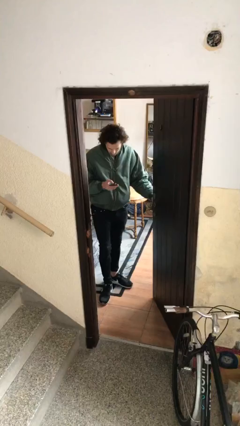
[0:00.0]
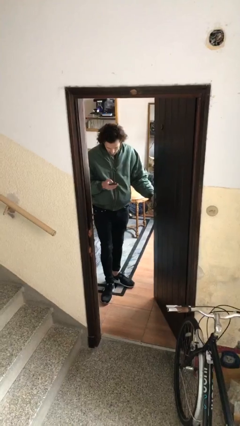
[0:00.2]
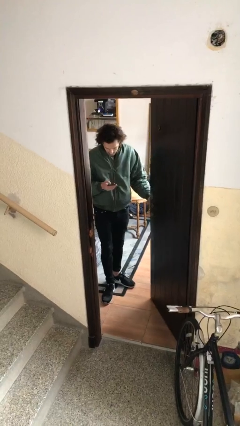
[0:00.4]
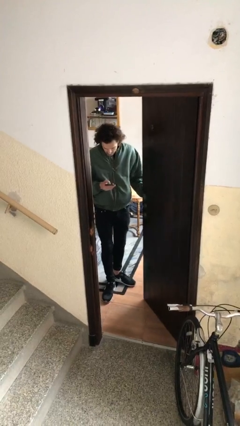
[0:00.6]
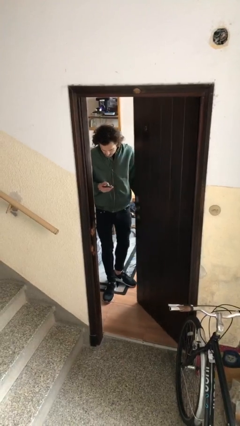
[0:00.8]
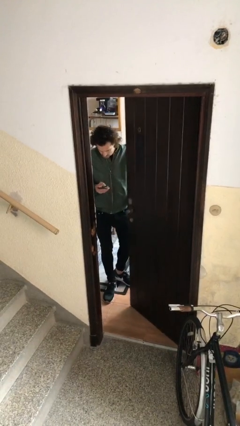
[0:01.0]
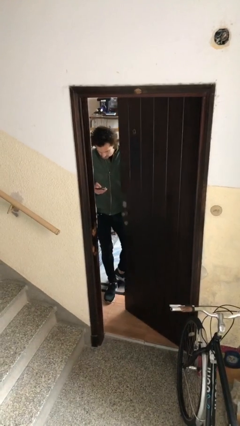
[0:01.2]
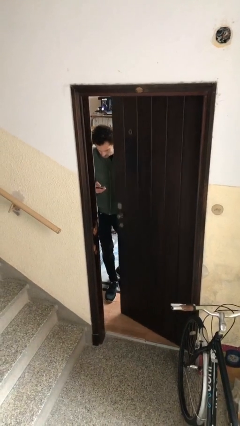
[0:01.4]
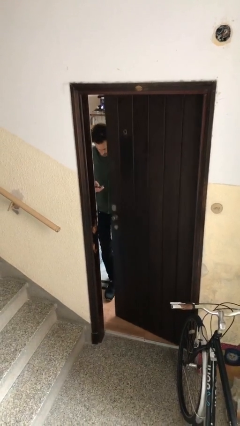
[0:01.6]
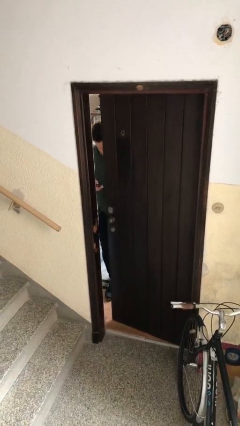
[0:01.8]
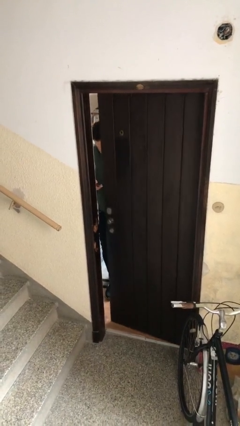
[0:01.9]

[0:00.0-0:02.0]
person closes facility door

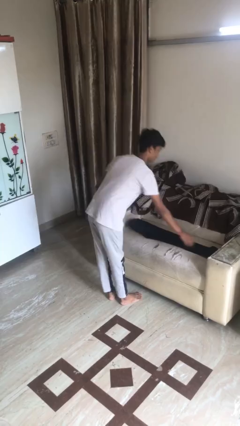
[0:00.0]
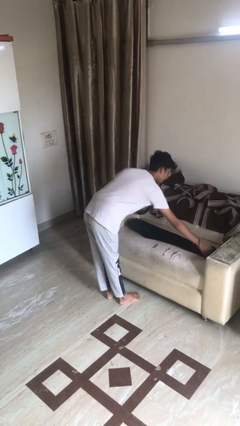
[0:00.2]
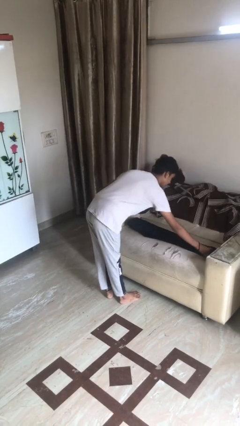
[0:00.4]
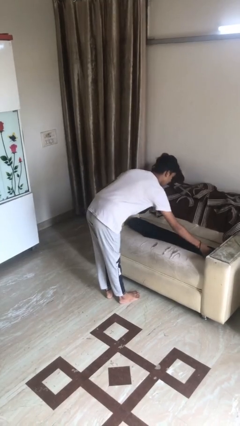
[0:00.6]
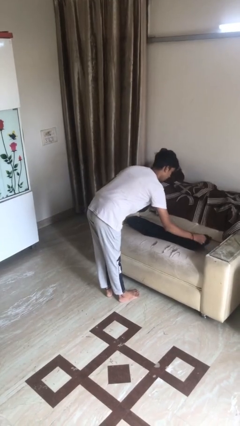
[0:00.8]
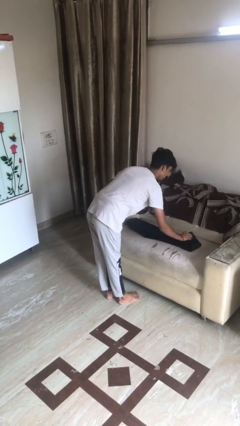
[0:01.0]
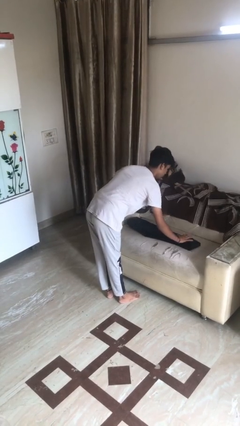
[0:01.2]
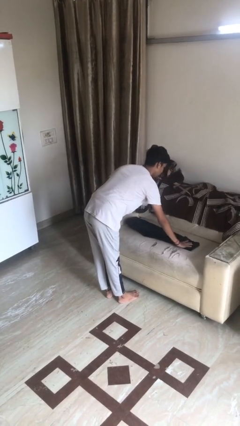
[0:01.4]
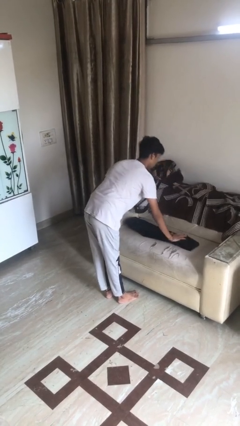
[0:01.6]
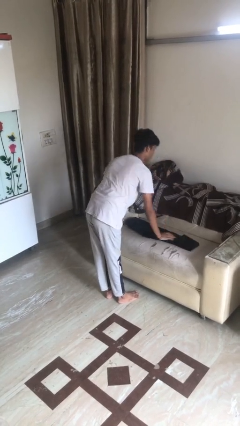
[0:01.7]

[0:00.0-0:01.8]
person folds pants

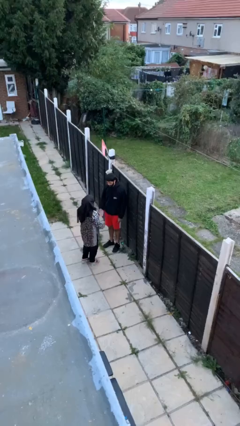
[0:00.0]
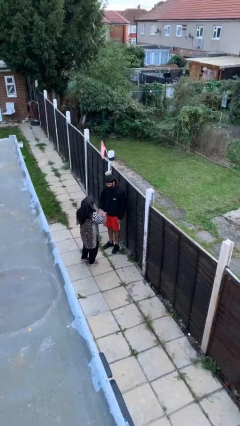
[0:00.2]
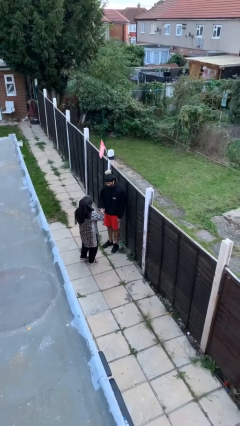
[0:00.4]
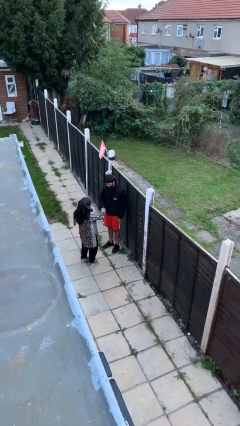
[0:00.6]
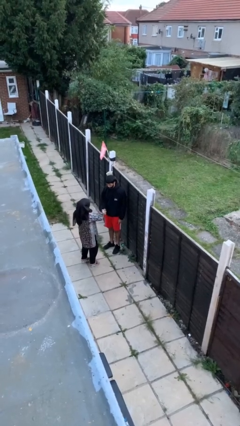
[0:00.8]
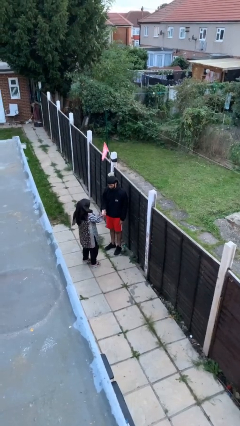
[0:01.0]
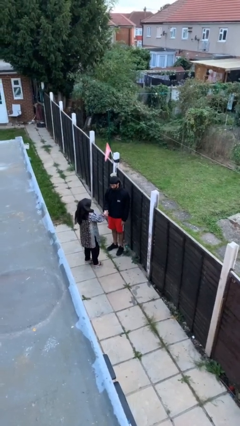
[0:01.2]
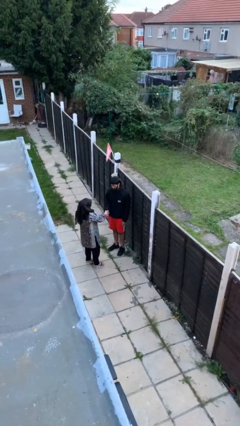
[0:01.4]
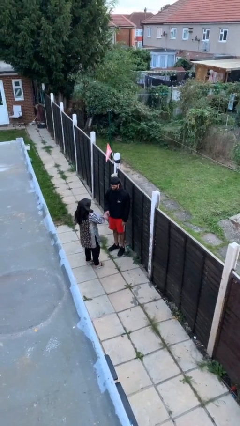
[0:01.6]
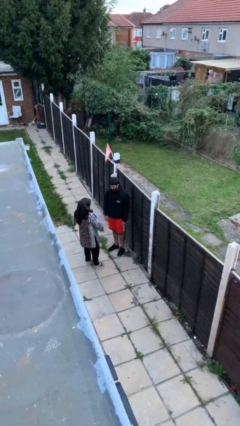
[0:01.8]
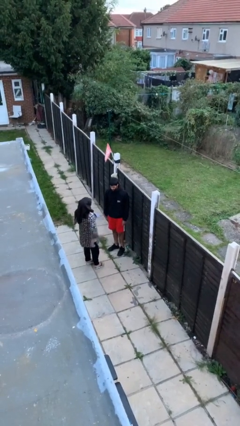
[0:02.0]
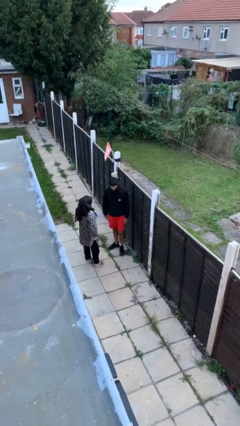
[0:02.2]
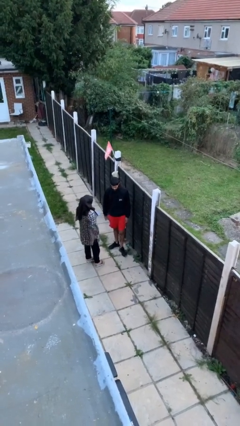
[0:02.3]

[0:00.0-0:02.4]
person shakes hand

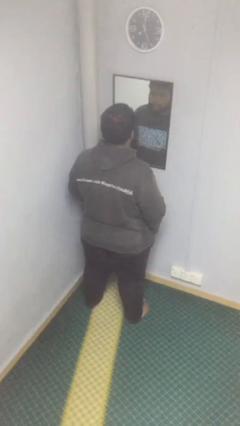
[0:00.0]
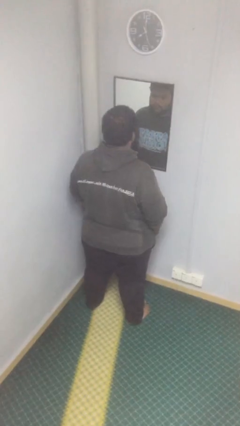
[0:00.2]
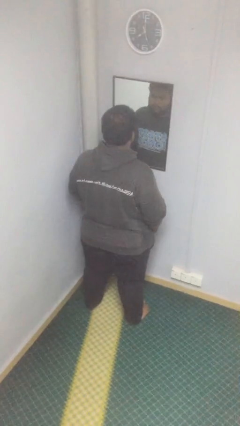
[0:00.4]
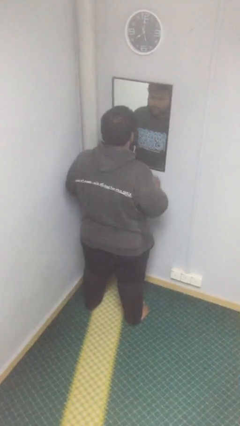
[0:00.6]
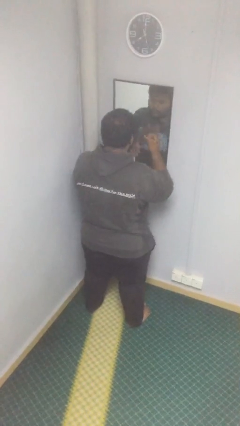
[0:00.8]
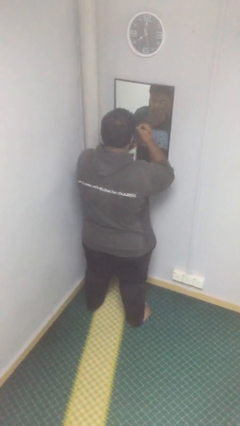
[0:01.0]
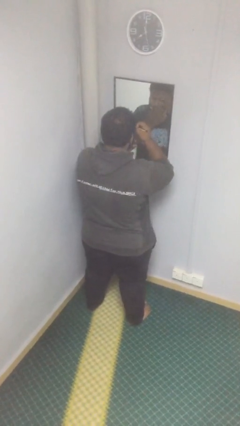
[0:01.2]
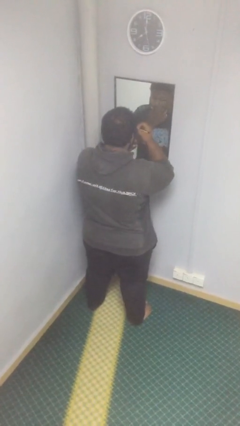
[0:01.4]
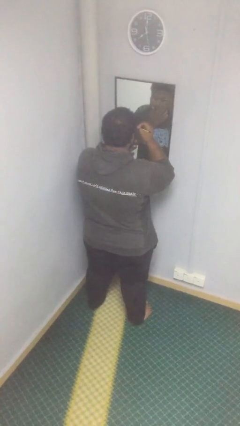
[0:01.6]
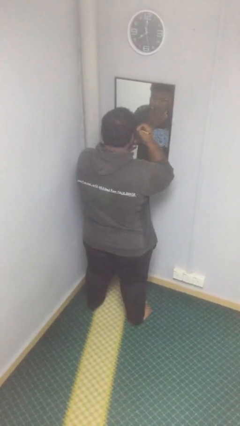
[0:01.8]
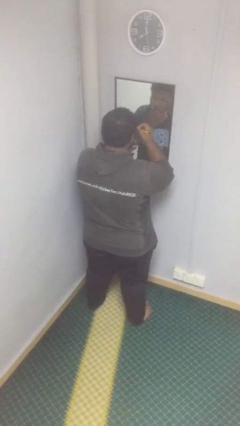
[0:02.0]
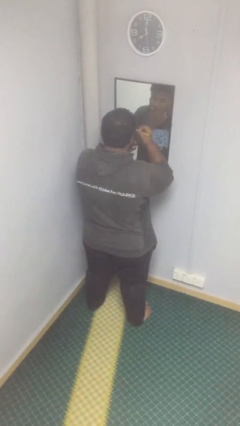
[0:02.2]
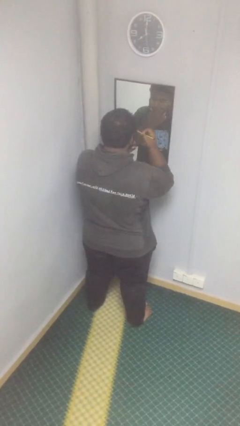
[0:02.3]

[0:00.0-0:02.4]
person applies eye makeup

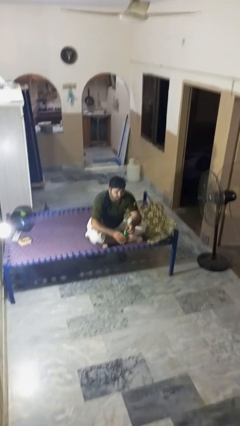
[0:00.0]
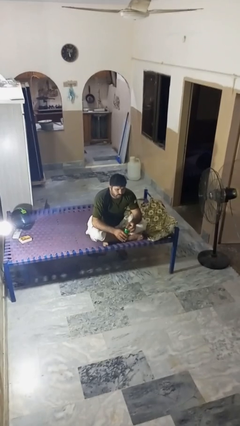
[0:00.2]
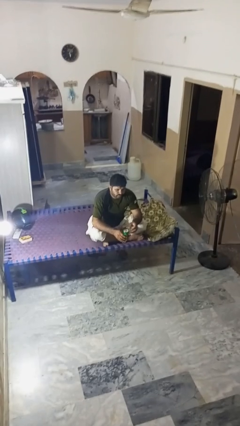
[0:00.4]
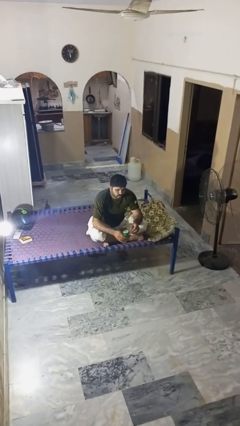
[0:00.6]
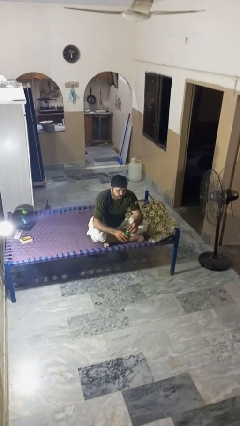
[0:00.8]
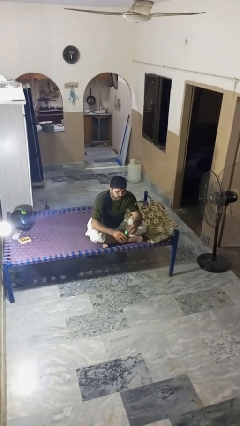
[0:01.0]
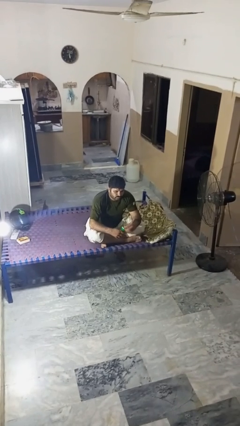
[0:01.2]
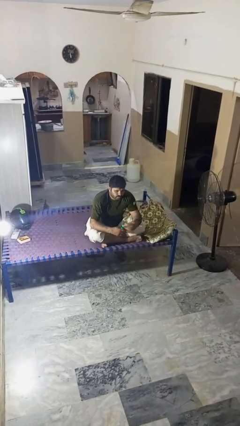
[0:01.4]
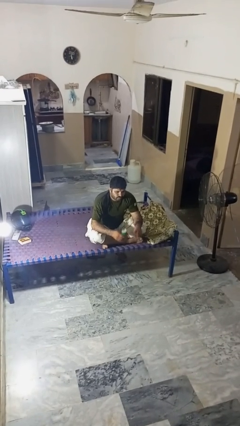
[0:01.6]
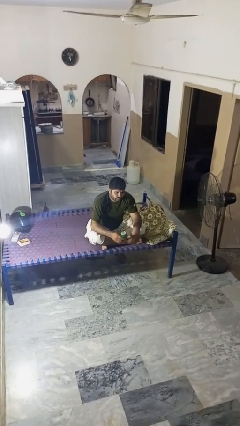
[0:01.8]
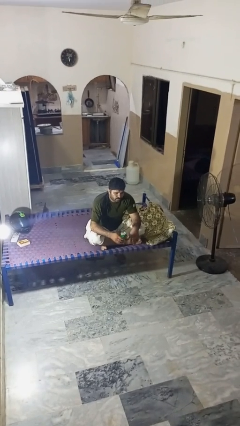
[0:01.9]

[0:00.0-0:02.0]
person opens beverage can

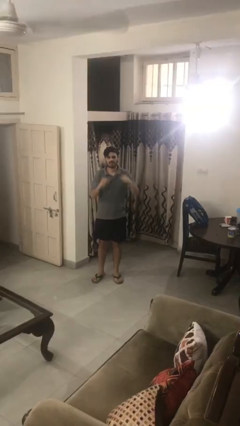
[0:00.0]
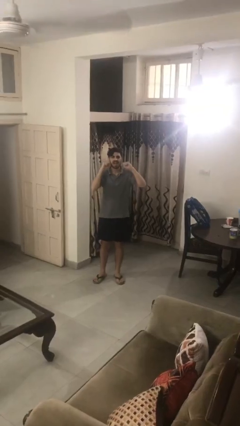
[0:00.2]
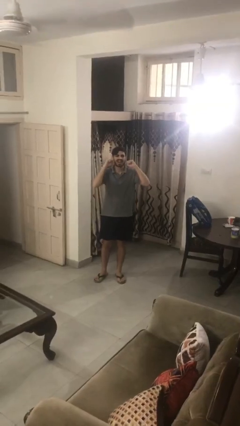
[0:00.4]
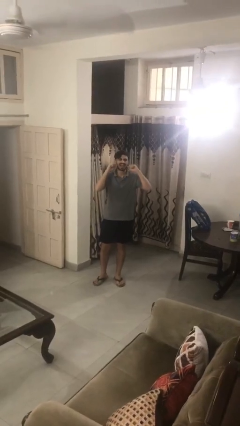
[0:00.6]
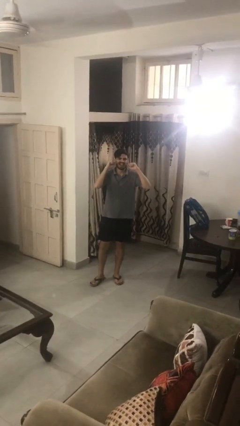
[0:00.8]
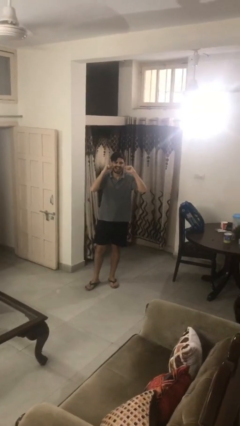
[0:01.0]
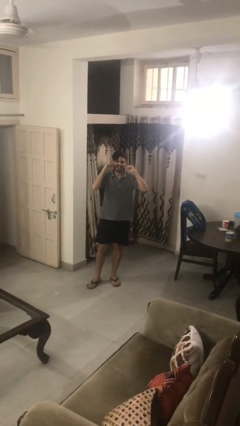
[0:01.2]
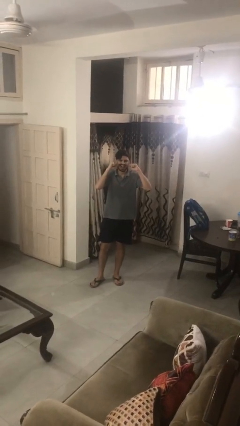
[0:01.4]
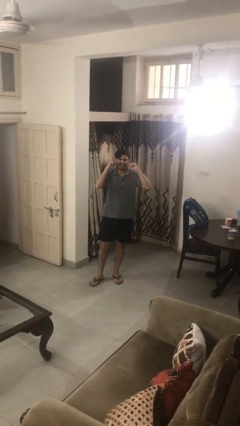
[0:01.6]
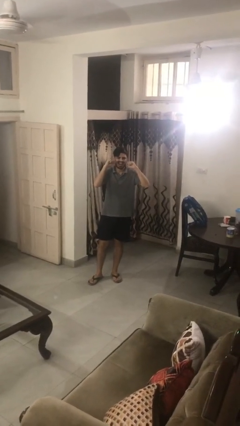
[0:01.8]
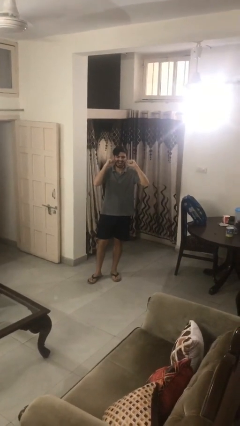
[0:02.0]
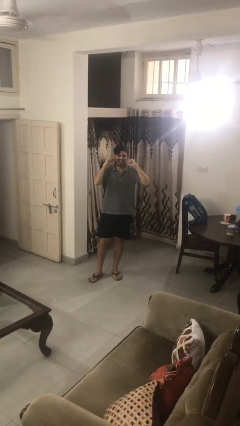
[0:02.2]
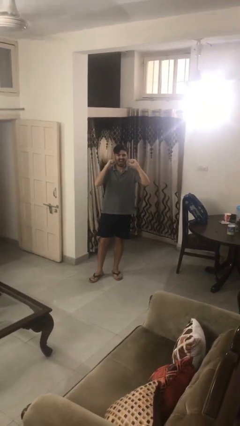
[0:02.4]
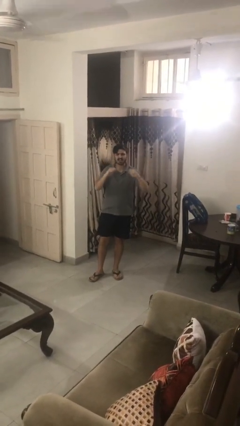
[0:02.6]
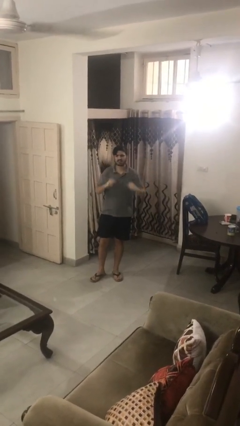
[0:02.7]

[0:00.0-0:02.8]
person flosses

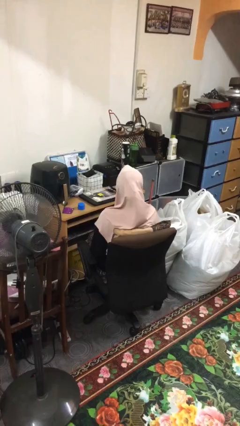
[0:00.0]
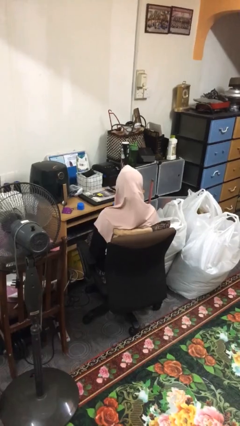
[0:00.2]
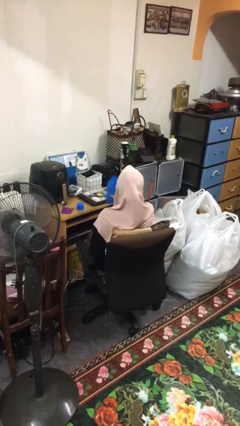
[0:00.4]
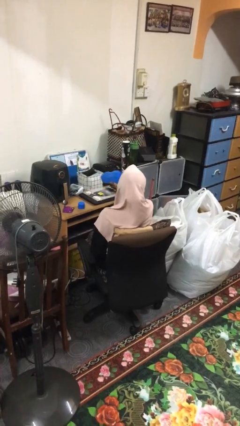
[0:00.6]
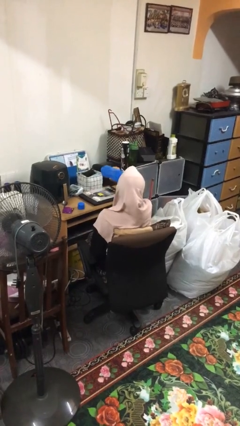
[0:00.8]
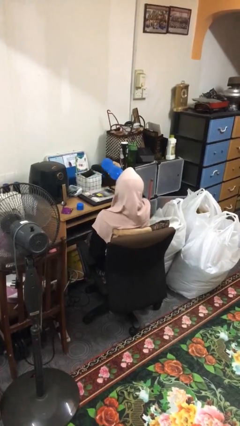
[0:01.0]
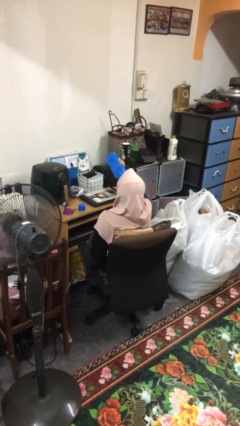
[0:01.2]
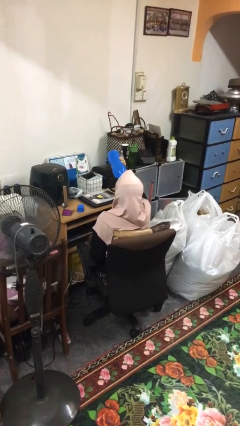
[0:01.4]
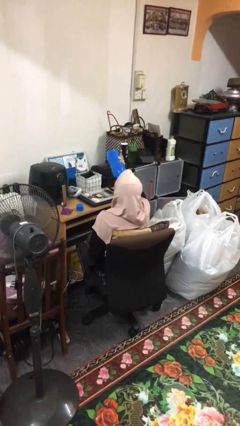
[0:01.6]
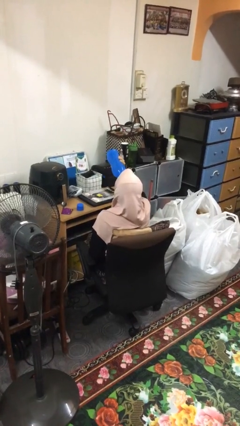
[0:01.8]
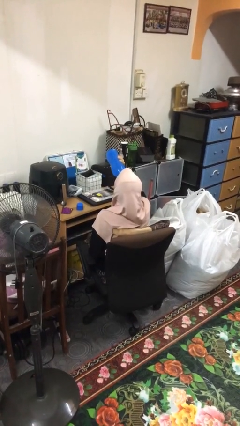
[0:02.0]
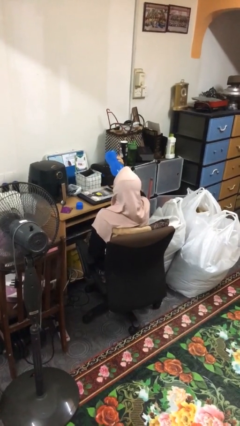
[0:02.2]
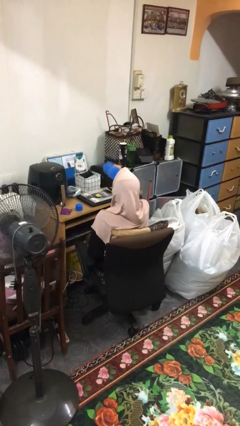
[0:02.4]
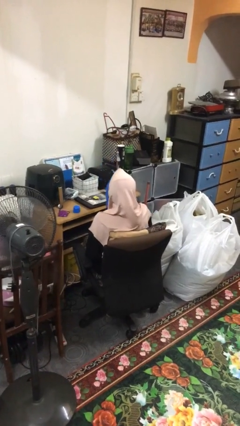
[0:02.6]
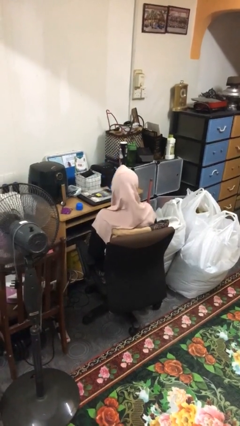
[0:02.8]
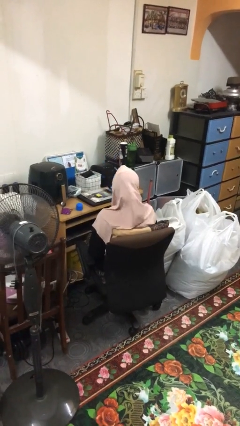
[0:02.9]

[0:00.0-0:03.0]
person drinks from bottle

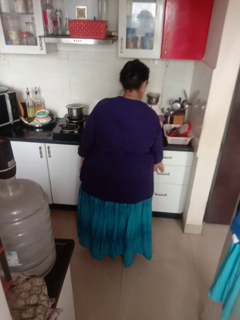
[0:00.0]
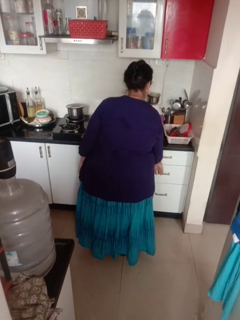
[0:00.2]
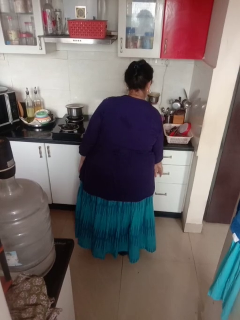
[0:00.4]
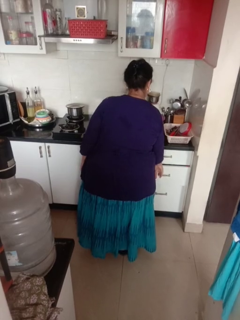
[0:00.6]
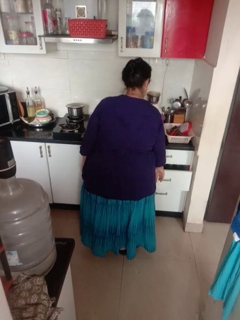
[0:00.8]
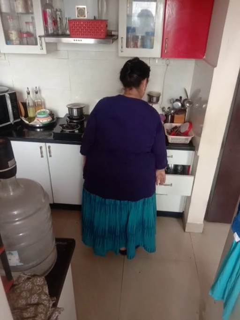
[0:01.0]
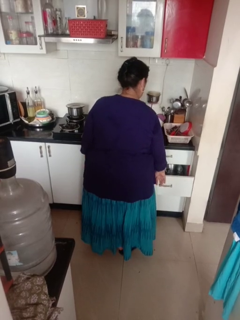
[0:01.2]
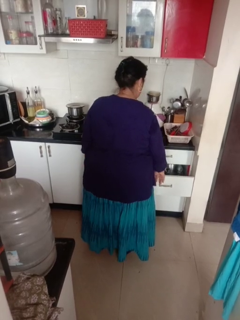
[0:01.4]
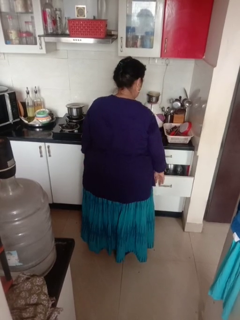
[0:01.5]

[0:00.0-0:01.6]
person opens kitchen drawer
